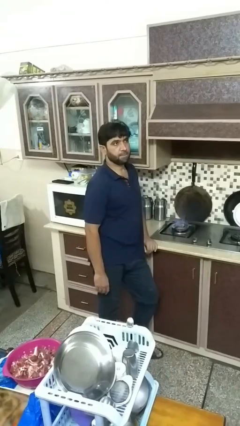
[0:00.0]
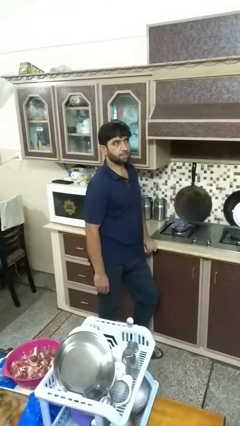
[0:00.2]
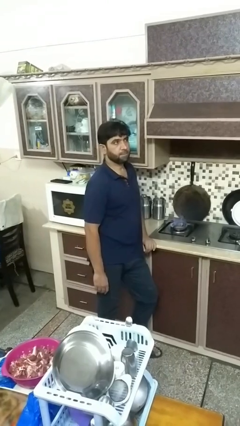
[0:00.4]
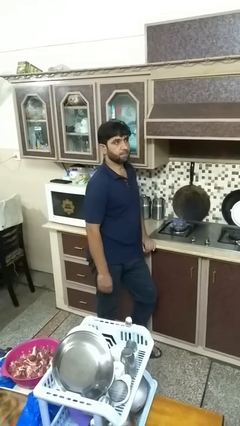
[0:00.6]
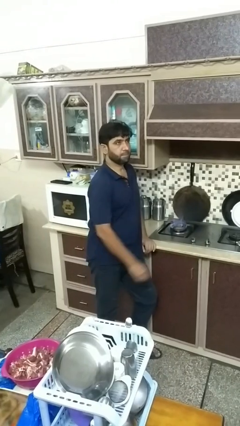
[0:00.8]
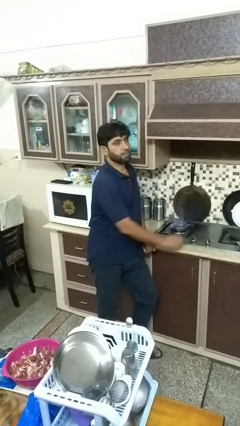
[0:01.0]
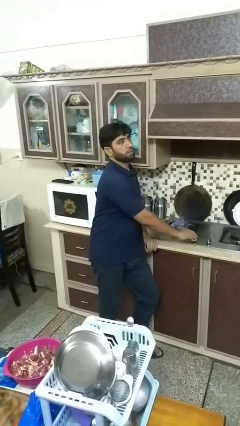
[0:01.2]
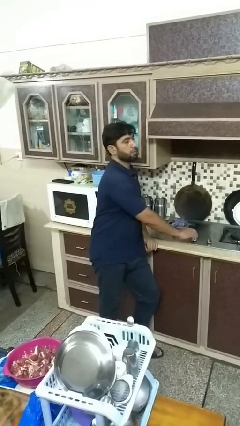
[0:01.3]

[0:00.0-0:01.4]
person turns off stovetop

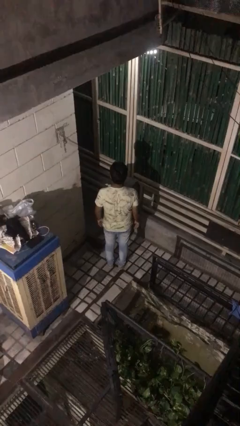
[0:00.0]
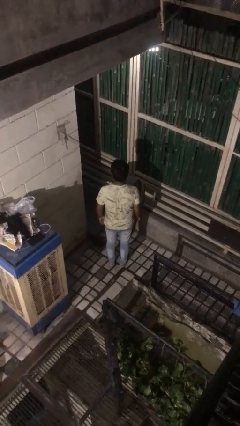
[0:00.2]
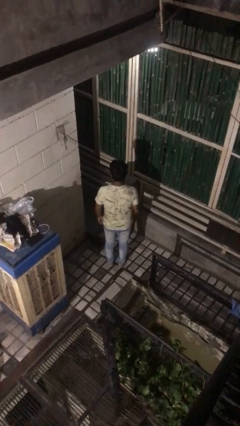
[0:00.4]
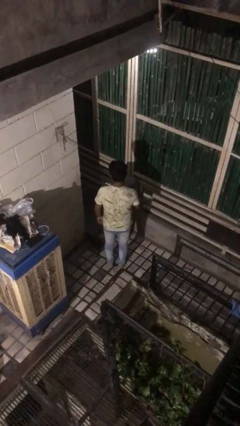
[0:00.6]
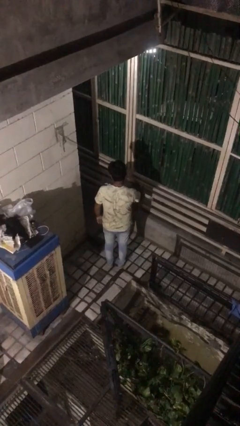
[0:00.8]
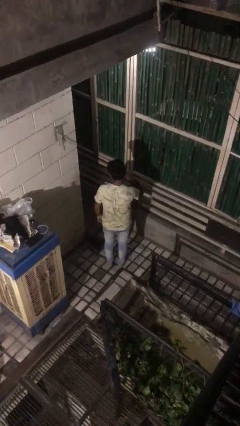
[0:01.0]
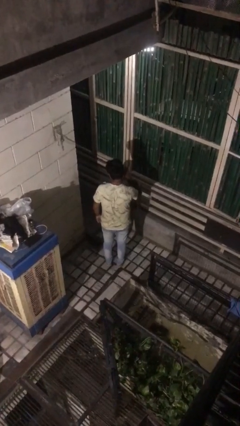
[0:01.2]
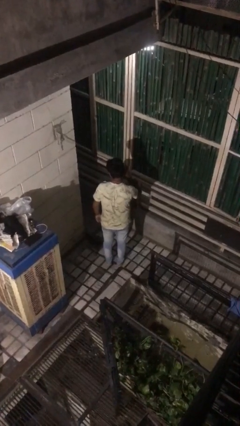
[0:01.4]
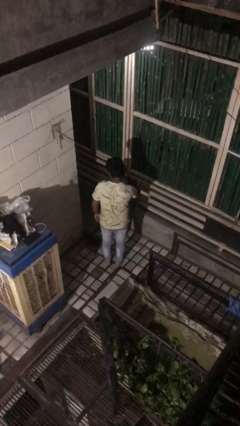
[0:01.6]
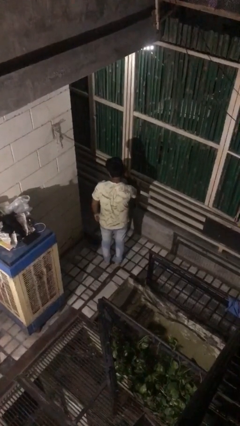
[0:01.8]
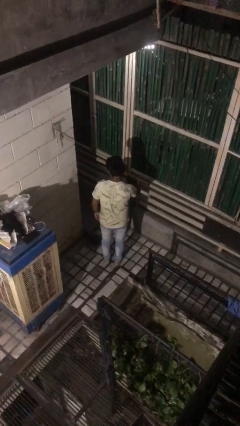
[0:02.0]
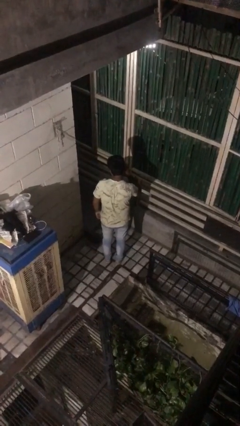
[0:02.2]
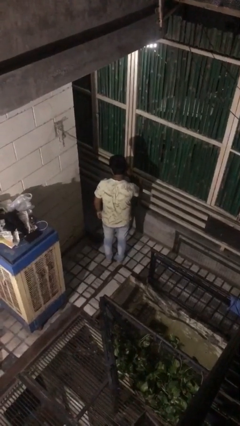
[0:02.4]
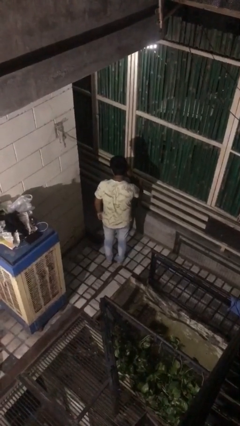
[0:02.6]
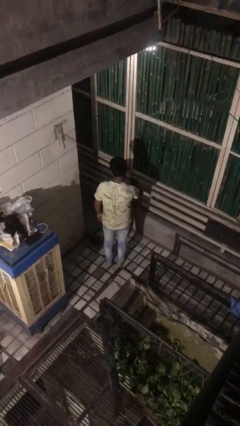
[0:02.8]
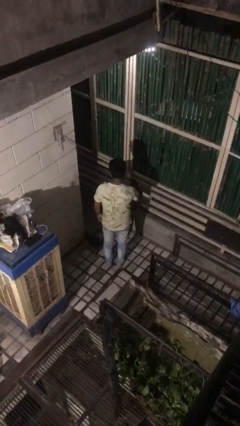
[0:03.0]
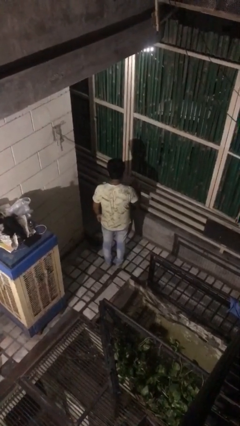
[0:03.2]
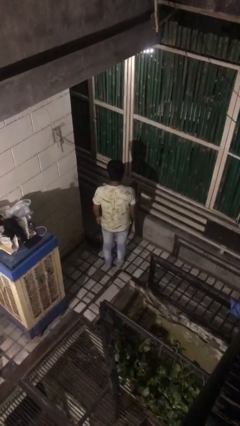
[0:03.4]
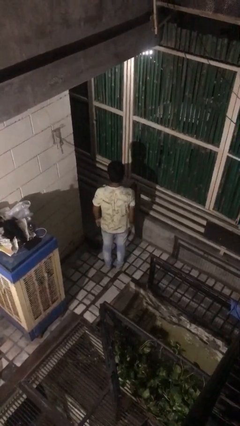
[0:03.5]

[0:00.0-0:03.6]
person gestures listen closely

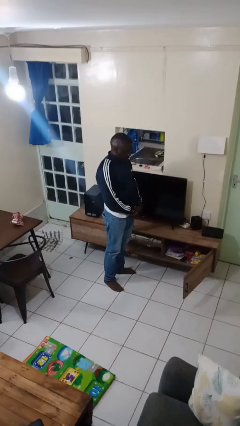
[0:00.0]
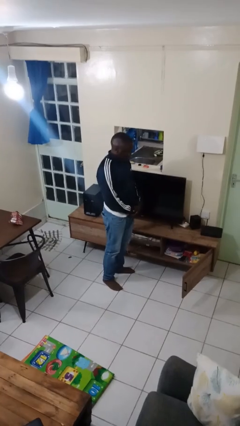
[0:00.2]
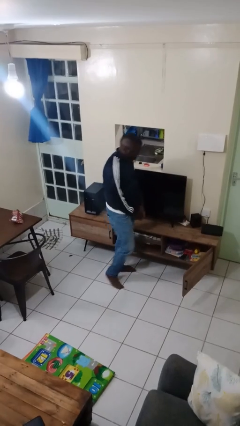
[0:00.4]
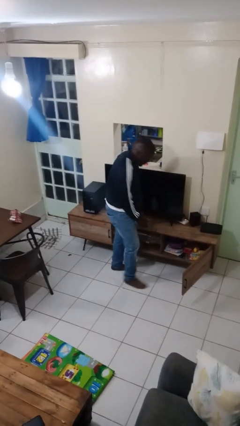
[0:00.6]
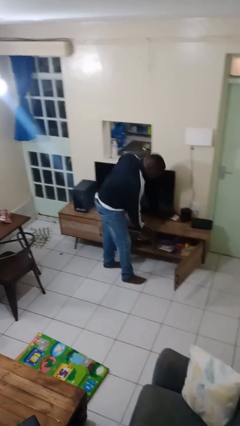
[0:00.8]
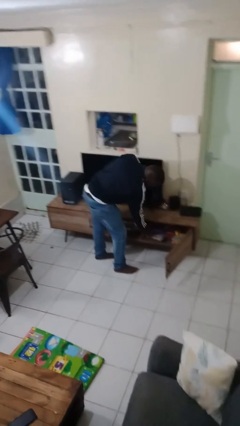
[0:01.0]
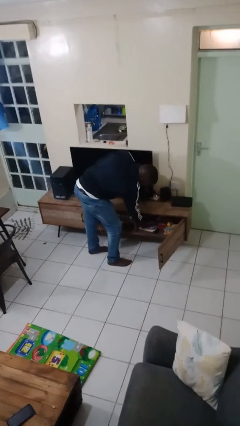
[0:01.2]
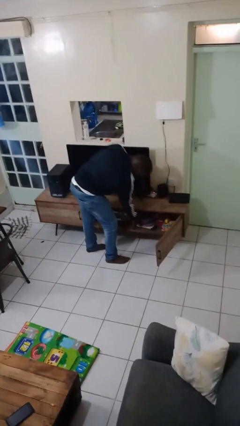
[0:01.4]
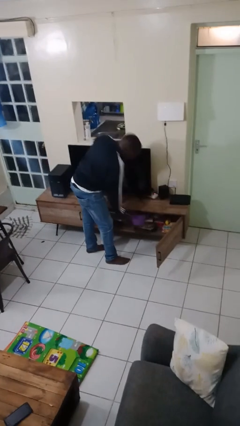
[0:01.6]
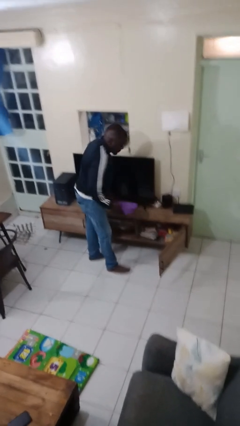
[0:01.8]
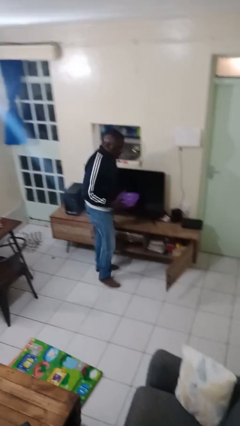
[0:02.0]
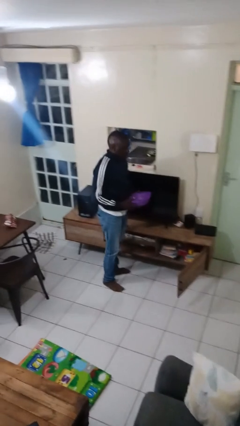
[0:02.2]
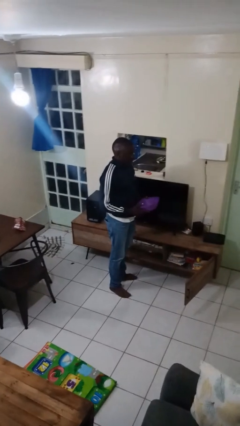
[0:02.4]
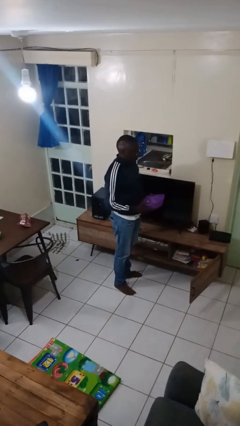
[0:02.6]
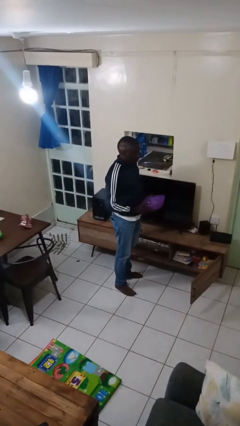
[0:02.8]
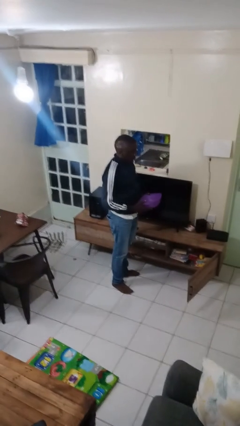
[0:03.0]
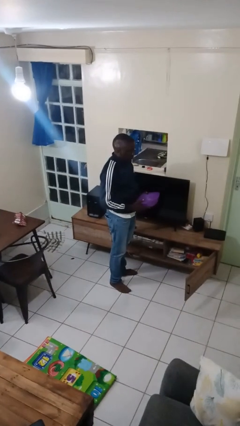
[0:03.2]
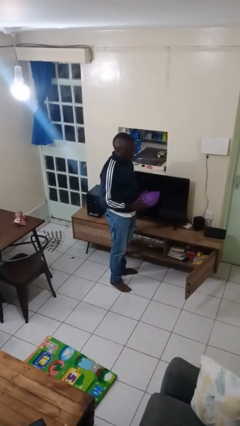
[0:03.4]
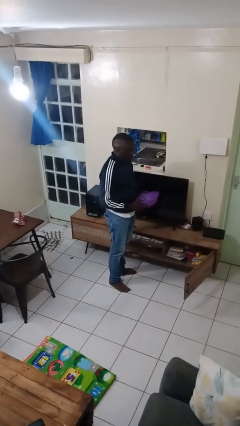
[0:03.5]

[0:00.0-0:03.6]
person picks up object from cabinet

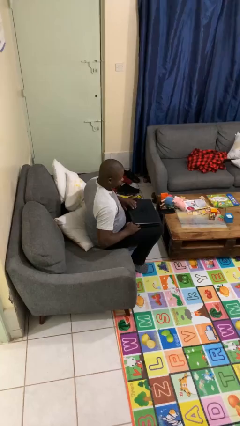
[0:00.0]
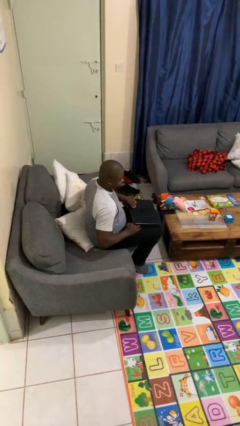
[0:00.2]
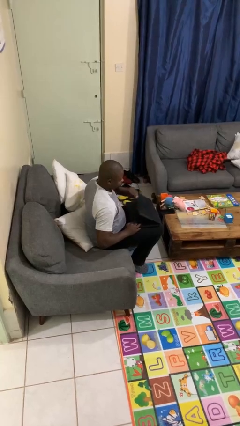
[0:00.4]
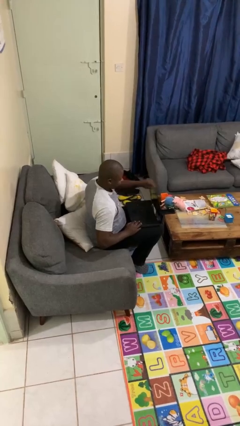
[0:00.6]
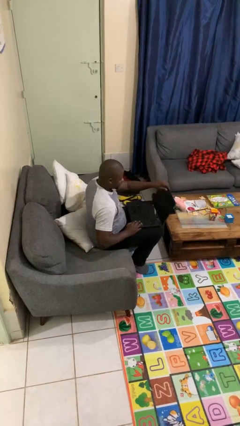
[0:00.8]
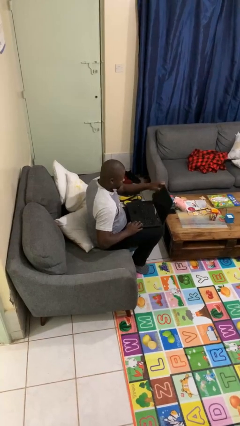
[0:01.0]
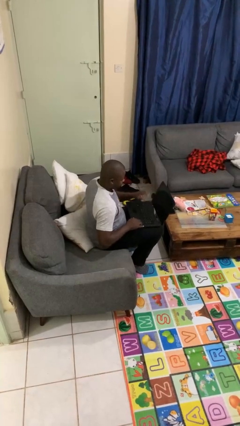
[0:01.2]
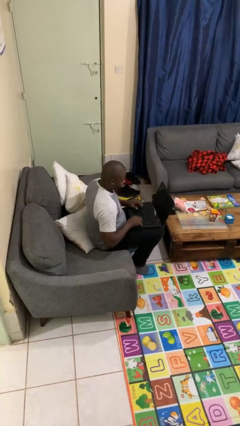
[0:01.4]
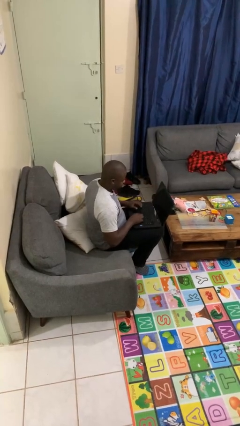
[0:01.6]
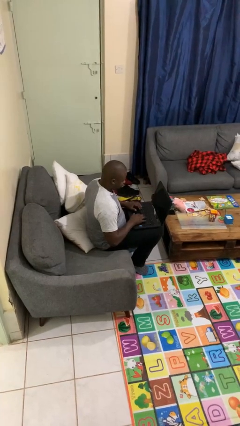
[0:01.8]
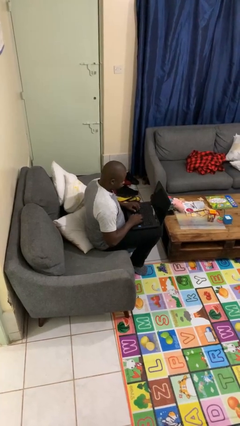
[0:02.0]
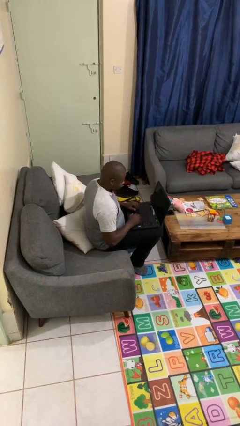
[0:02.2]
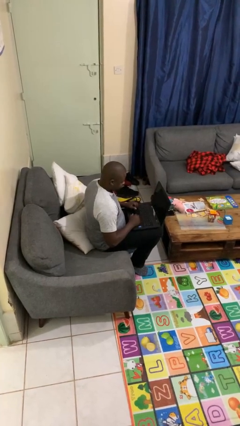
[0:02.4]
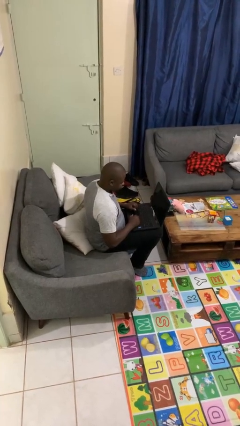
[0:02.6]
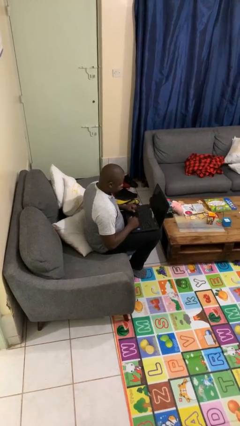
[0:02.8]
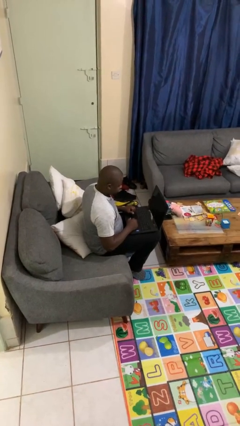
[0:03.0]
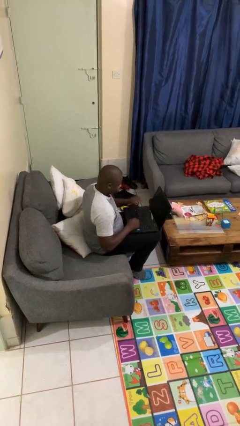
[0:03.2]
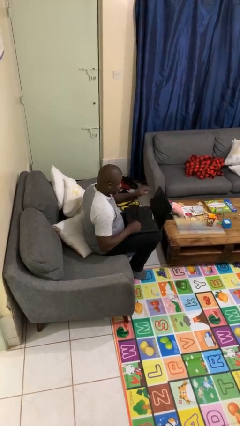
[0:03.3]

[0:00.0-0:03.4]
person opens laptop

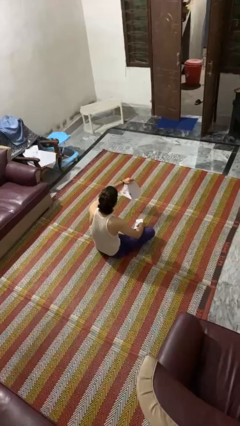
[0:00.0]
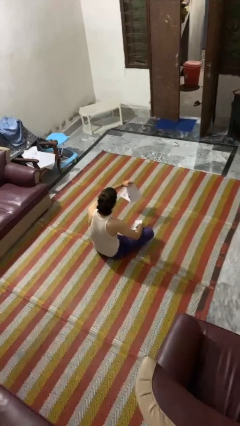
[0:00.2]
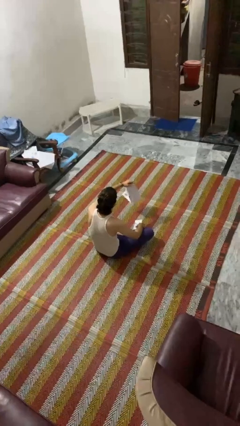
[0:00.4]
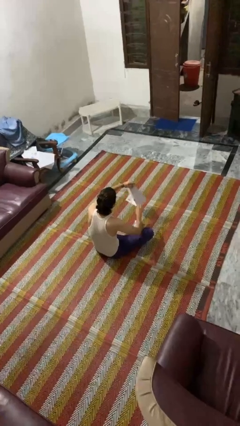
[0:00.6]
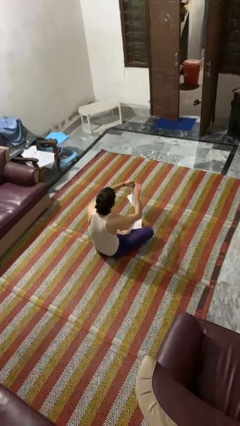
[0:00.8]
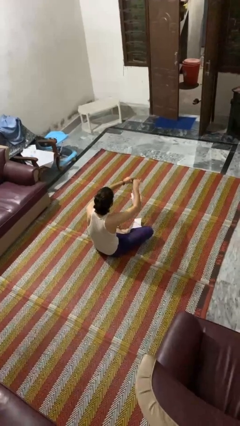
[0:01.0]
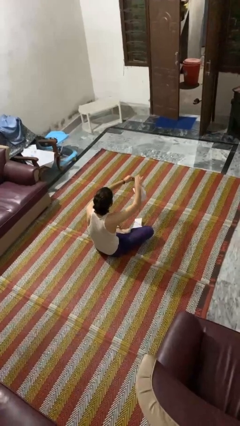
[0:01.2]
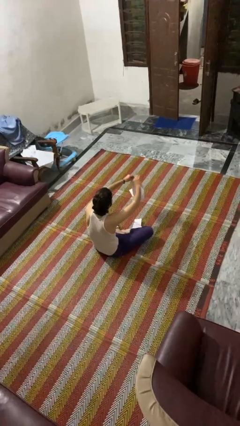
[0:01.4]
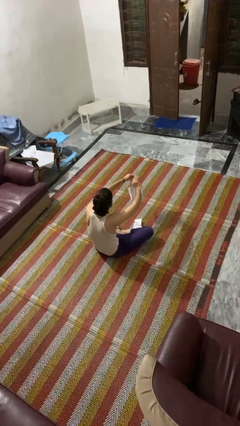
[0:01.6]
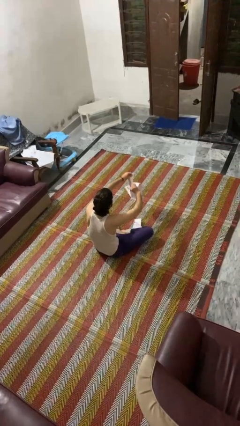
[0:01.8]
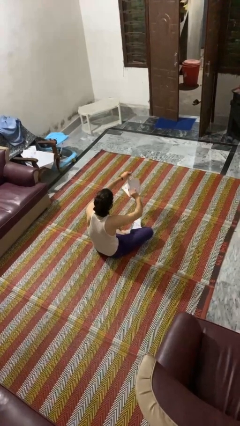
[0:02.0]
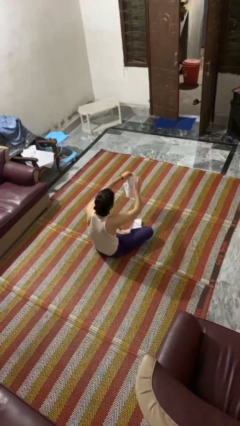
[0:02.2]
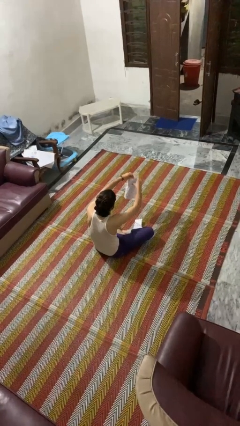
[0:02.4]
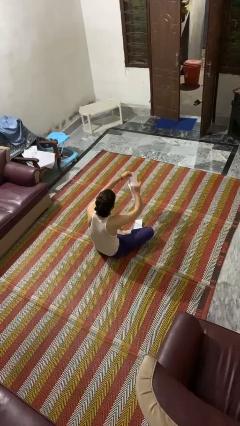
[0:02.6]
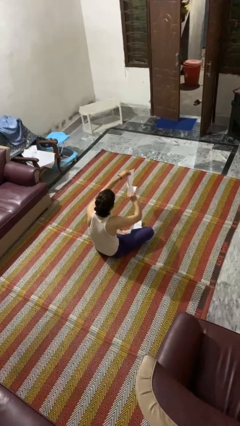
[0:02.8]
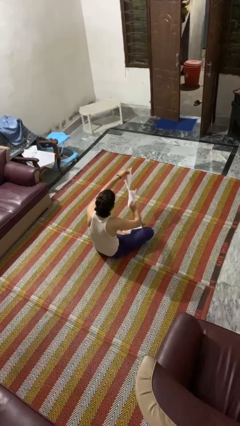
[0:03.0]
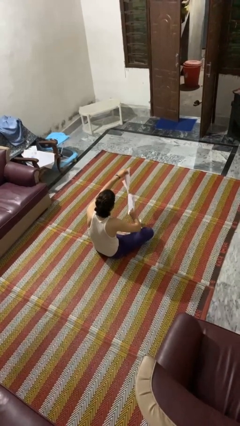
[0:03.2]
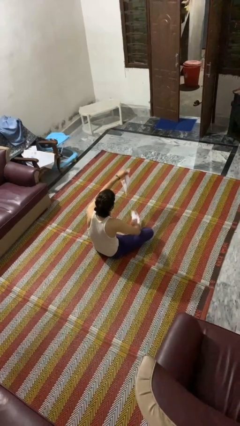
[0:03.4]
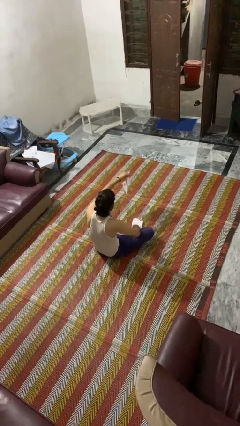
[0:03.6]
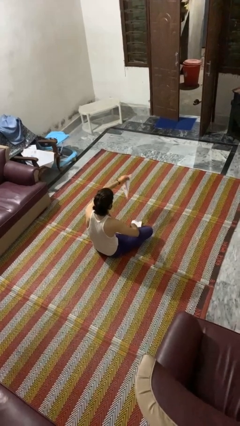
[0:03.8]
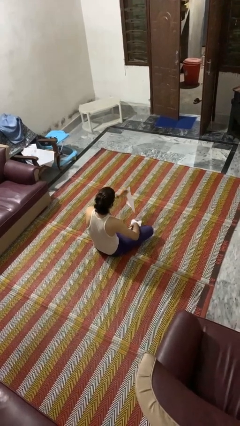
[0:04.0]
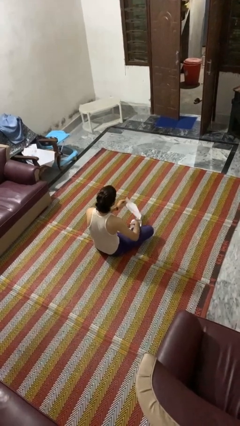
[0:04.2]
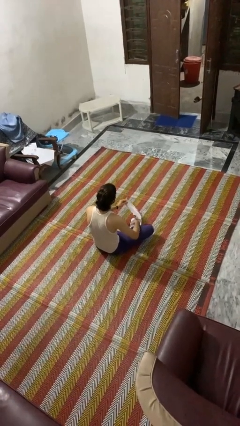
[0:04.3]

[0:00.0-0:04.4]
person tears paper

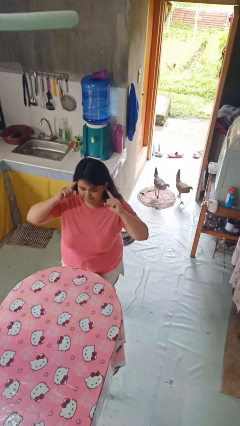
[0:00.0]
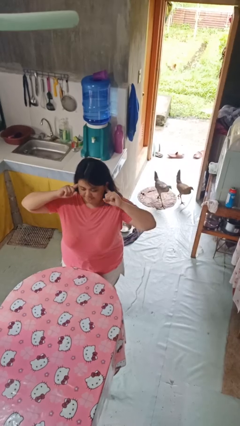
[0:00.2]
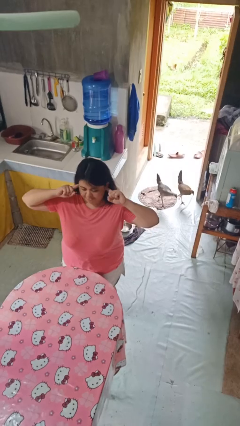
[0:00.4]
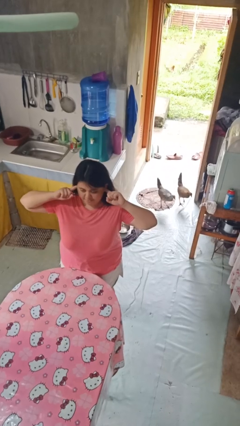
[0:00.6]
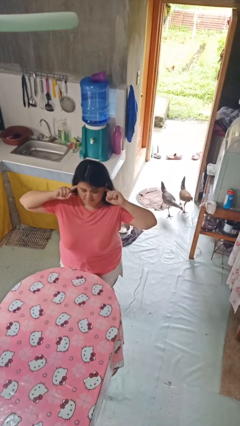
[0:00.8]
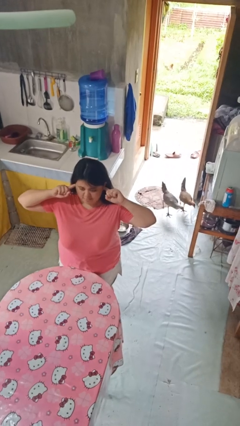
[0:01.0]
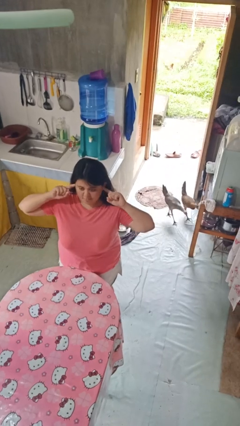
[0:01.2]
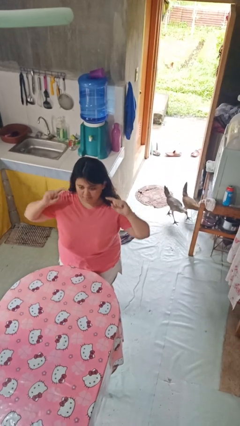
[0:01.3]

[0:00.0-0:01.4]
person puts fingers in ear
